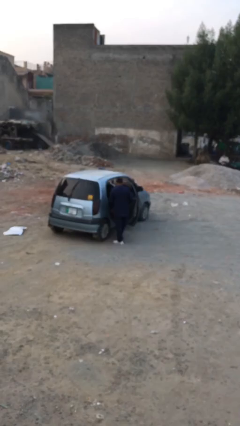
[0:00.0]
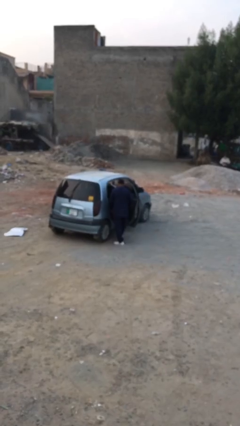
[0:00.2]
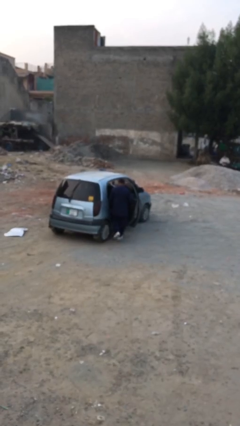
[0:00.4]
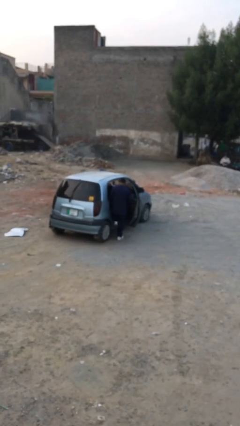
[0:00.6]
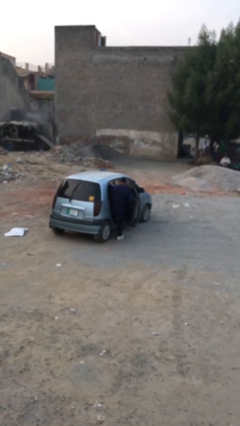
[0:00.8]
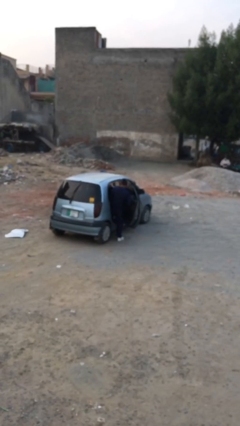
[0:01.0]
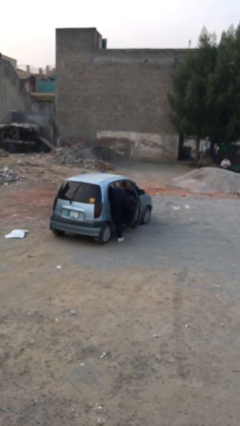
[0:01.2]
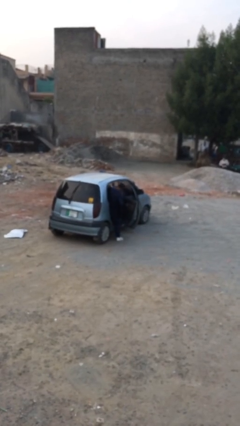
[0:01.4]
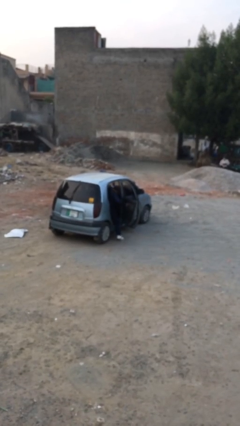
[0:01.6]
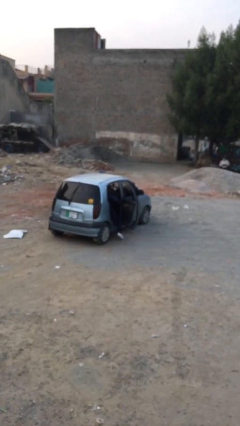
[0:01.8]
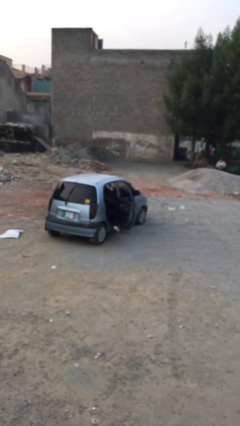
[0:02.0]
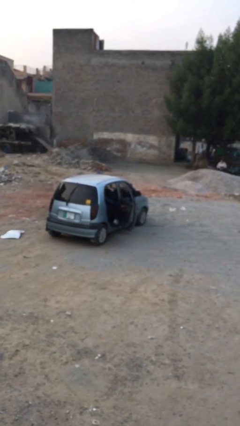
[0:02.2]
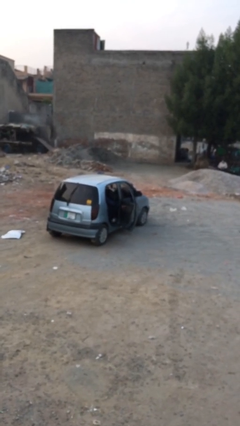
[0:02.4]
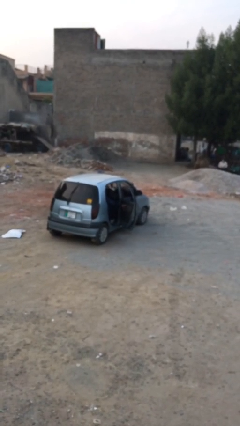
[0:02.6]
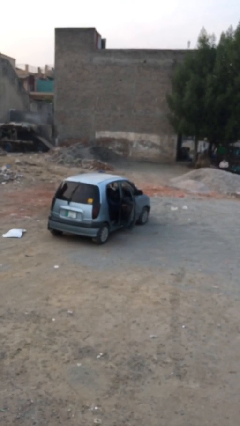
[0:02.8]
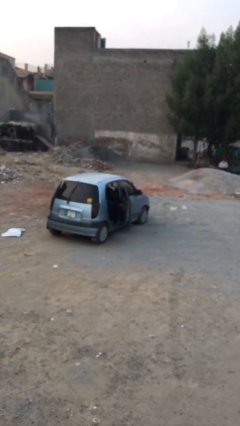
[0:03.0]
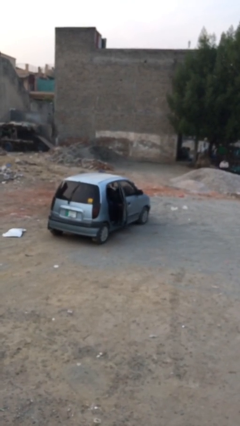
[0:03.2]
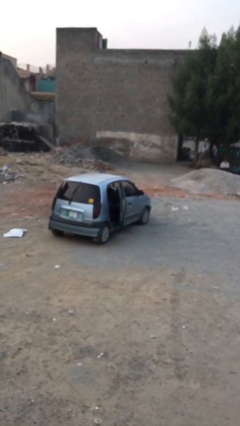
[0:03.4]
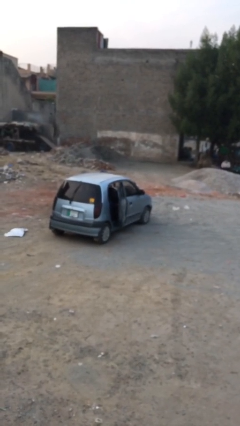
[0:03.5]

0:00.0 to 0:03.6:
person enters car

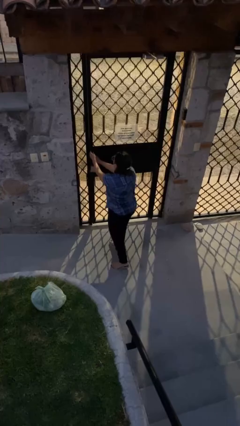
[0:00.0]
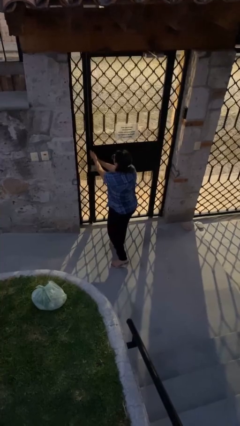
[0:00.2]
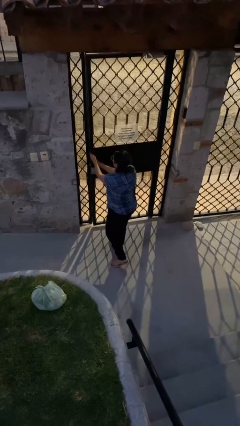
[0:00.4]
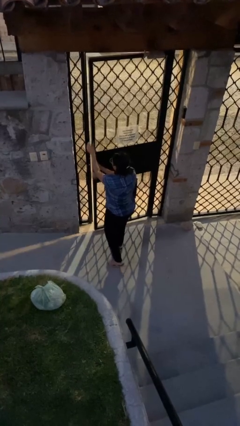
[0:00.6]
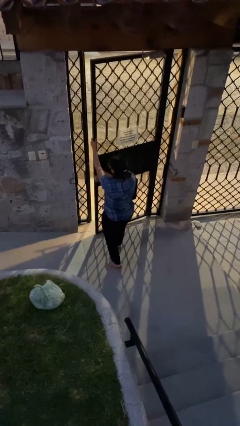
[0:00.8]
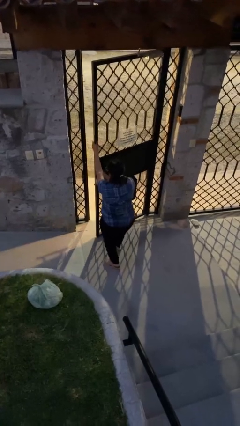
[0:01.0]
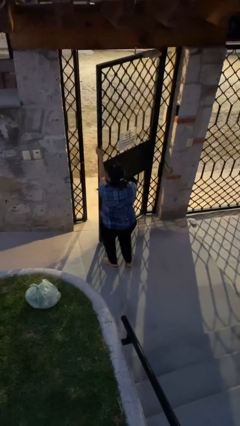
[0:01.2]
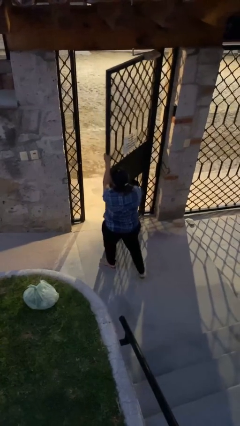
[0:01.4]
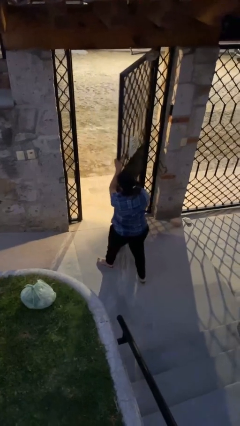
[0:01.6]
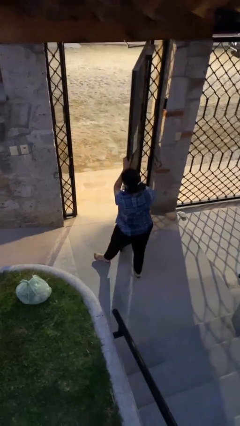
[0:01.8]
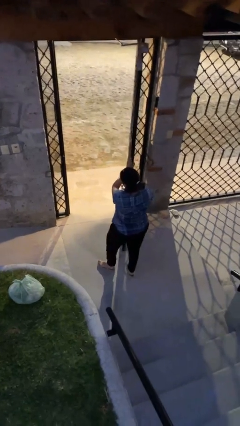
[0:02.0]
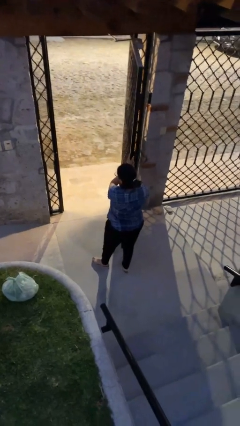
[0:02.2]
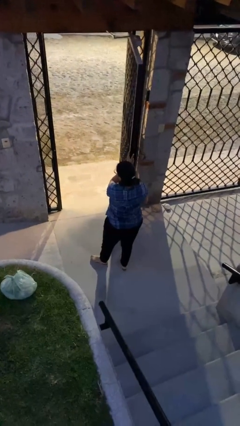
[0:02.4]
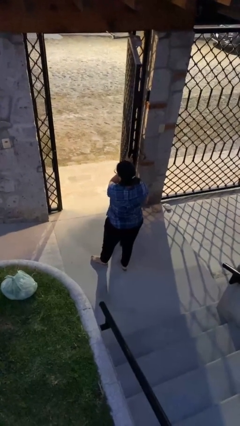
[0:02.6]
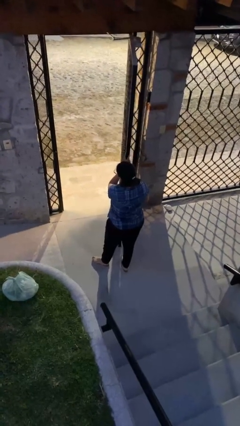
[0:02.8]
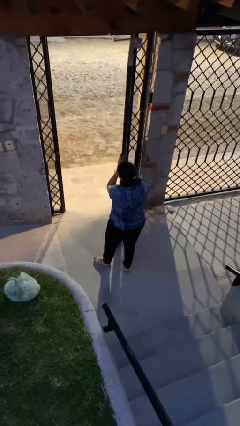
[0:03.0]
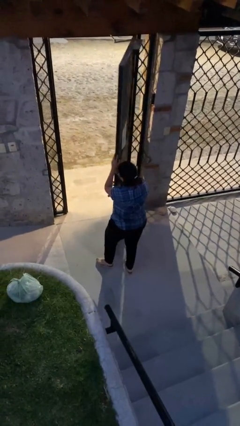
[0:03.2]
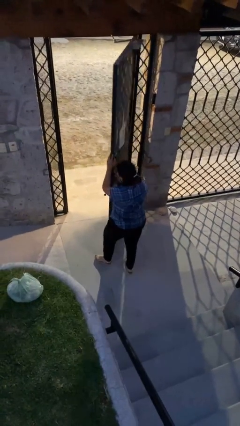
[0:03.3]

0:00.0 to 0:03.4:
person opens facility door

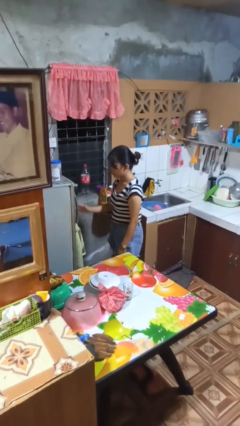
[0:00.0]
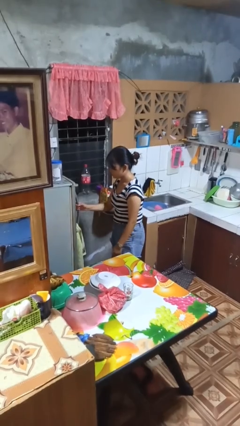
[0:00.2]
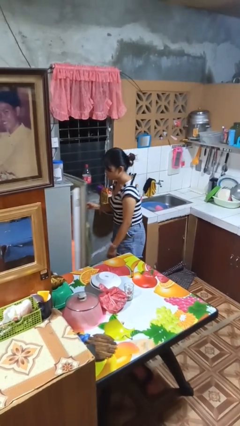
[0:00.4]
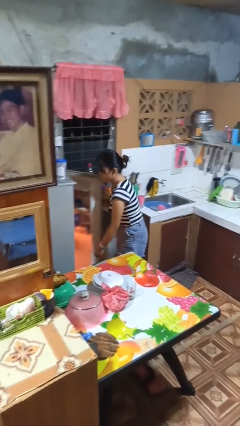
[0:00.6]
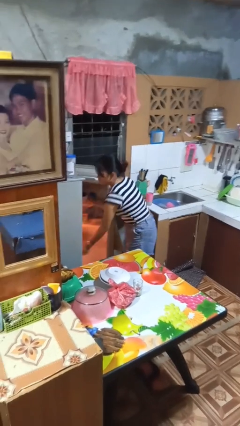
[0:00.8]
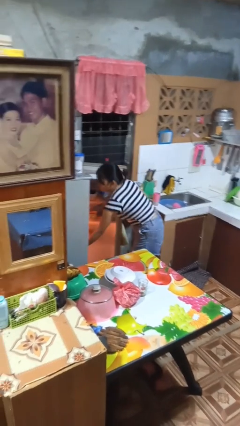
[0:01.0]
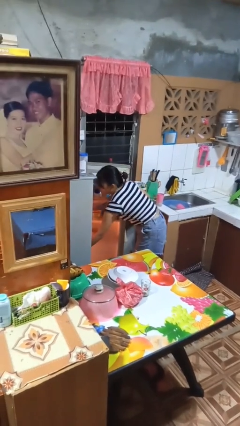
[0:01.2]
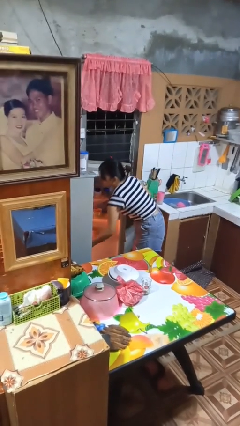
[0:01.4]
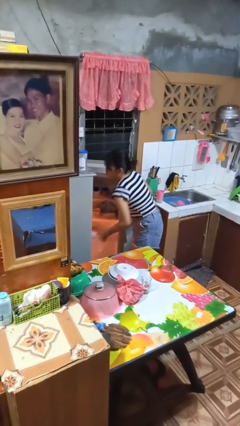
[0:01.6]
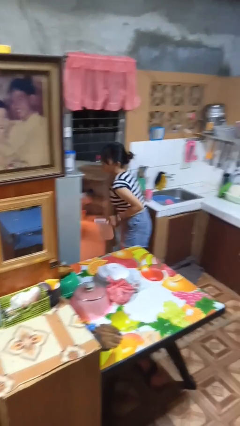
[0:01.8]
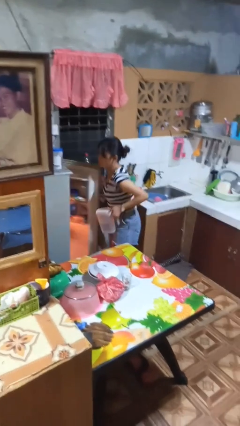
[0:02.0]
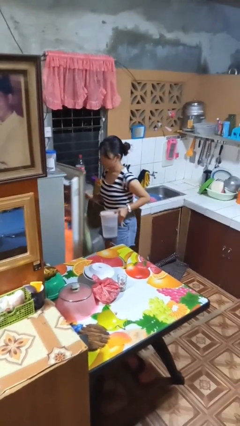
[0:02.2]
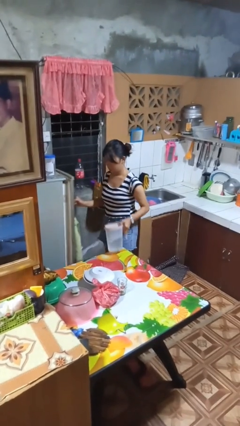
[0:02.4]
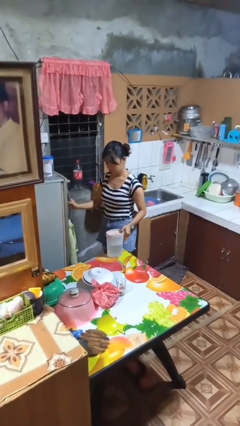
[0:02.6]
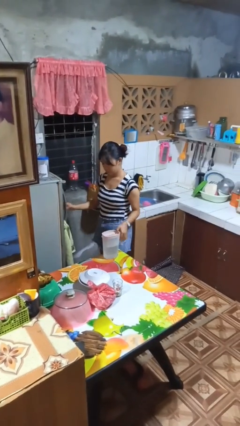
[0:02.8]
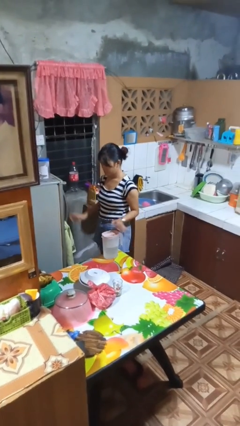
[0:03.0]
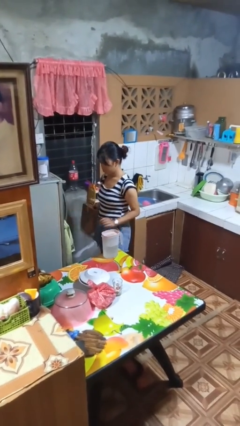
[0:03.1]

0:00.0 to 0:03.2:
person takes object from refrigerator

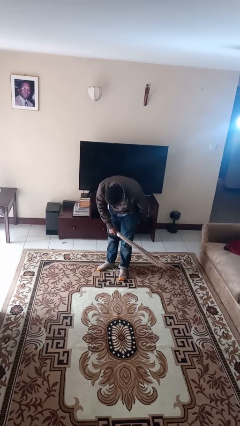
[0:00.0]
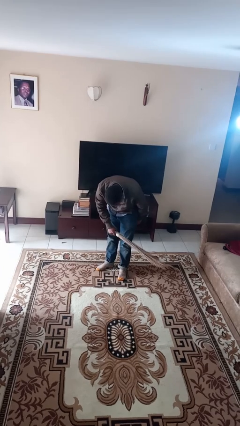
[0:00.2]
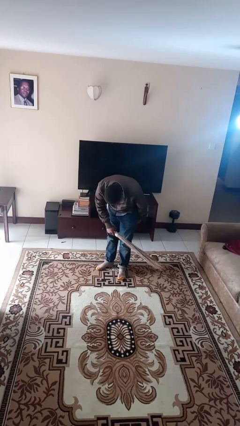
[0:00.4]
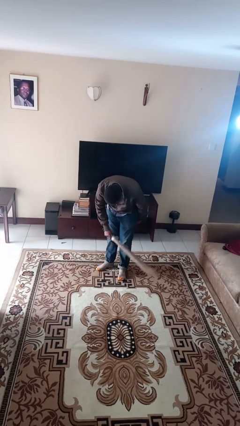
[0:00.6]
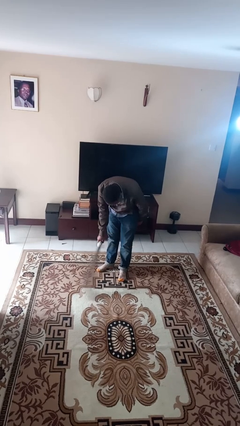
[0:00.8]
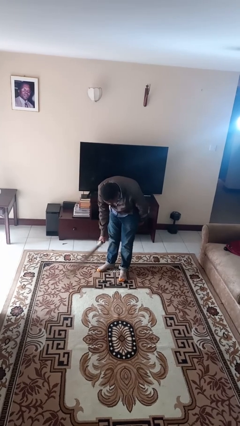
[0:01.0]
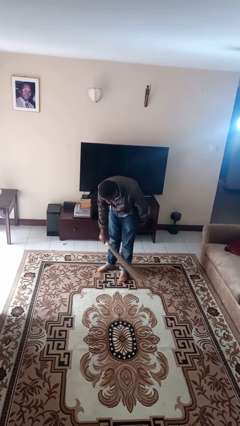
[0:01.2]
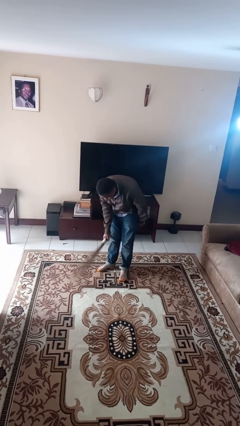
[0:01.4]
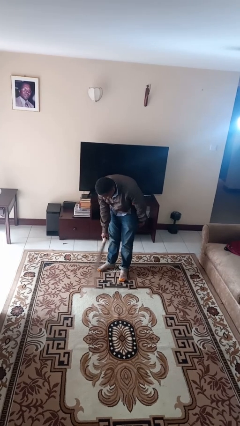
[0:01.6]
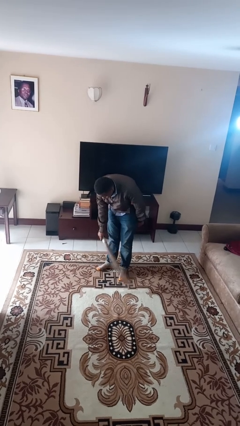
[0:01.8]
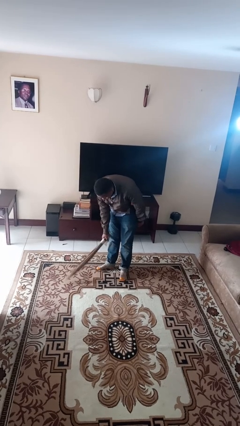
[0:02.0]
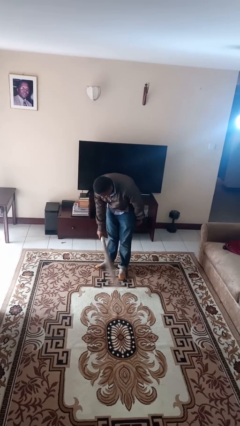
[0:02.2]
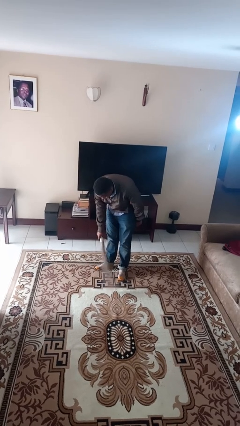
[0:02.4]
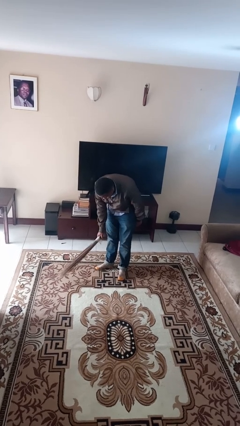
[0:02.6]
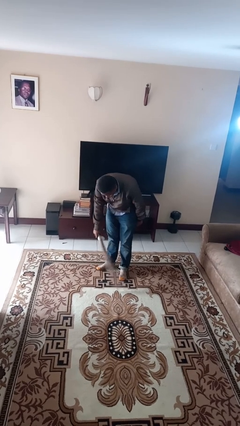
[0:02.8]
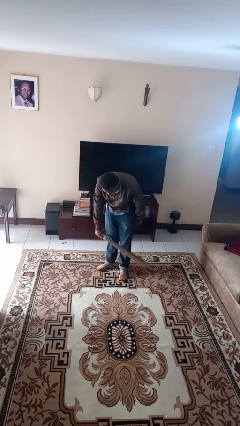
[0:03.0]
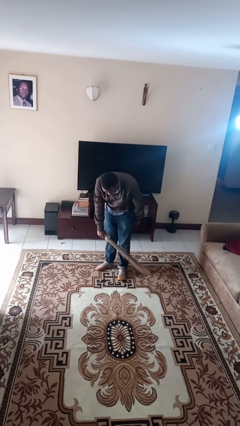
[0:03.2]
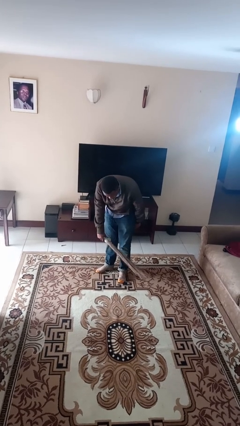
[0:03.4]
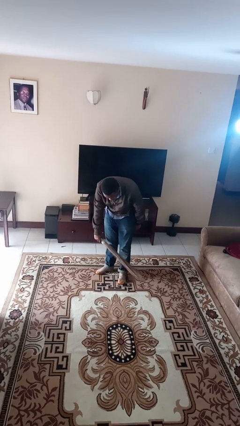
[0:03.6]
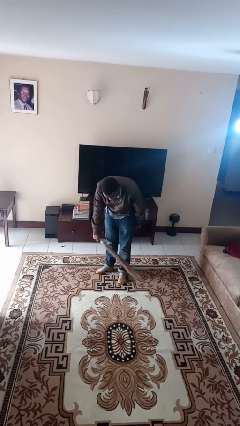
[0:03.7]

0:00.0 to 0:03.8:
person sweeps floor

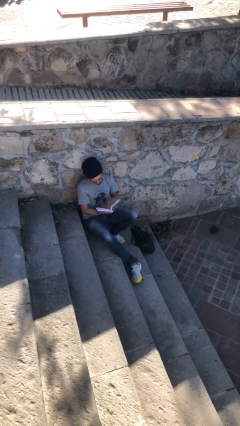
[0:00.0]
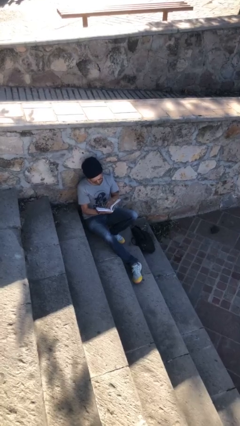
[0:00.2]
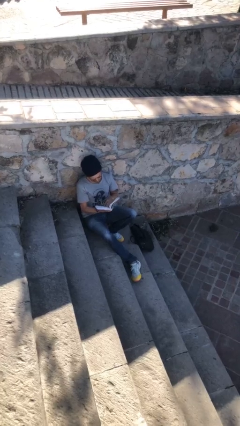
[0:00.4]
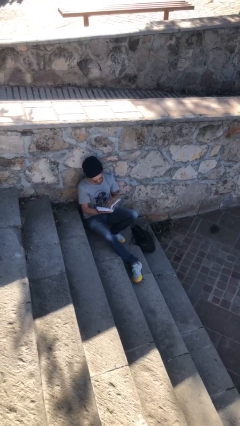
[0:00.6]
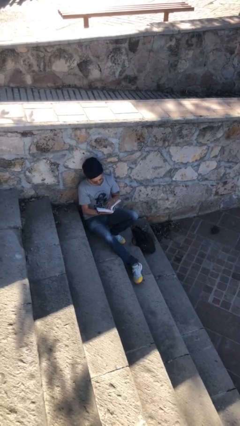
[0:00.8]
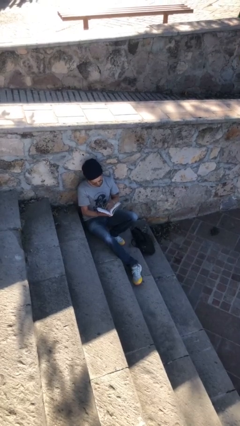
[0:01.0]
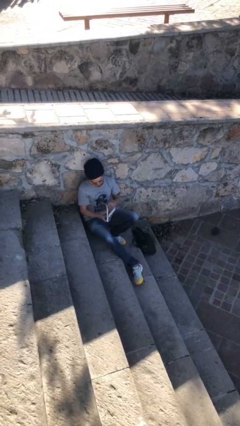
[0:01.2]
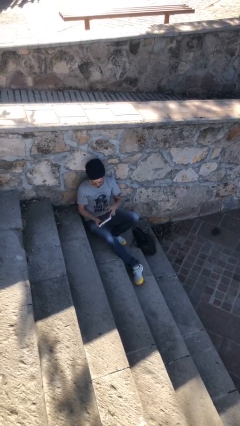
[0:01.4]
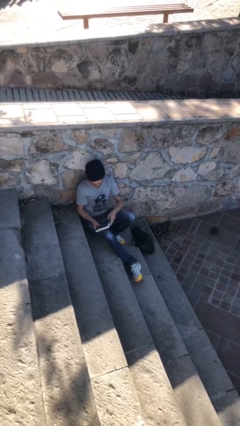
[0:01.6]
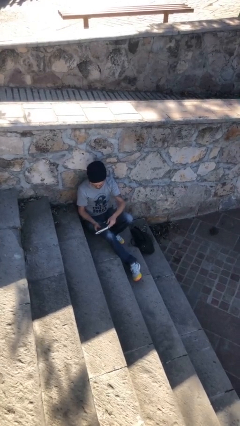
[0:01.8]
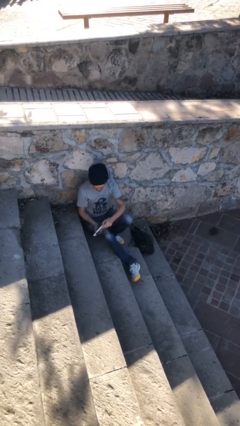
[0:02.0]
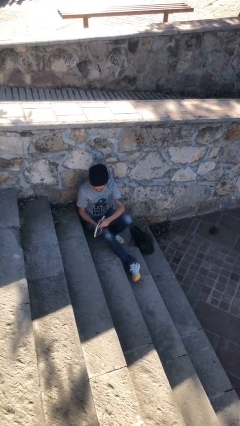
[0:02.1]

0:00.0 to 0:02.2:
person reads document

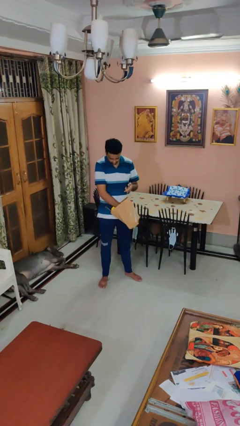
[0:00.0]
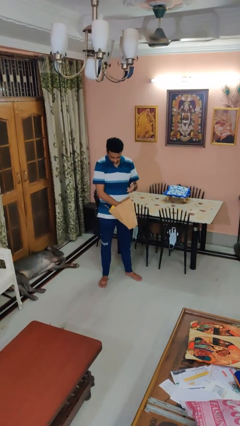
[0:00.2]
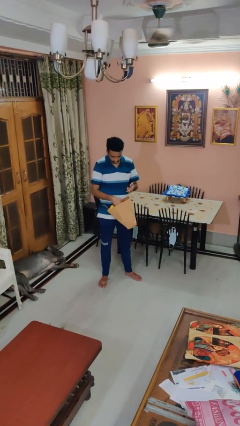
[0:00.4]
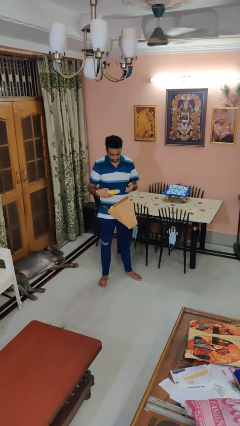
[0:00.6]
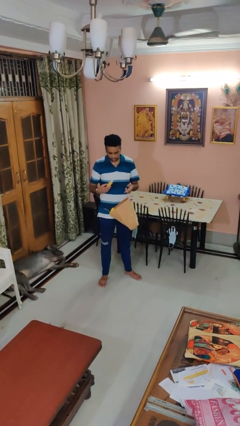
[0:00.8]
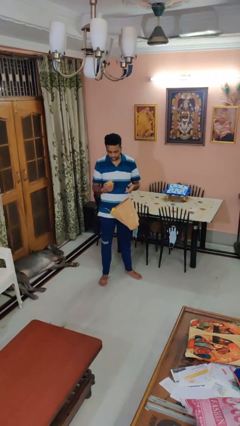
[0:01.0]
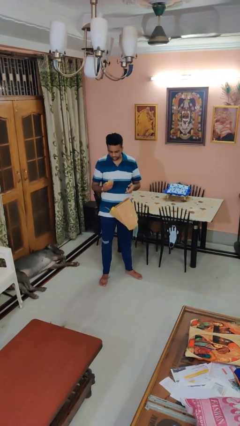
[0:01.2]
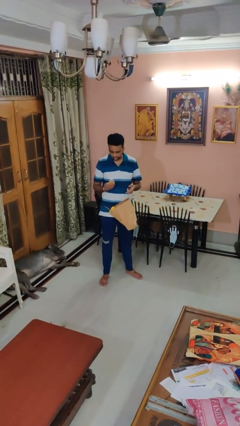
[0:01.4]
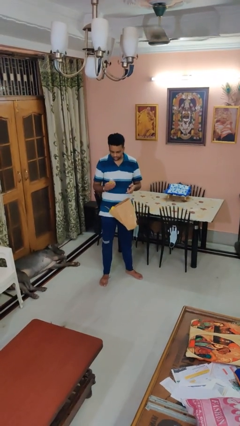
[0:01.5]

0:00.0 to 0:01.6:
person takes object from bag
